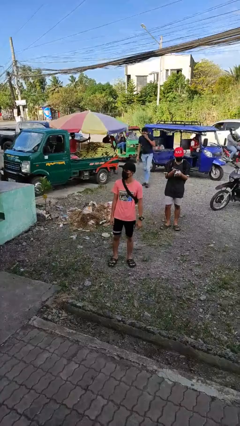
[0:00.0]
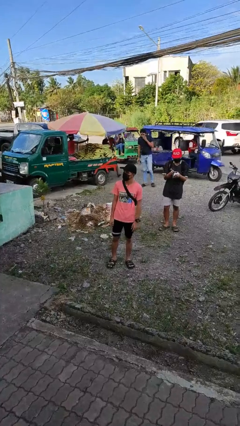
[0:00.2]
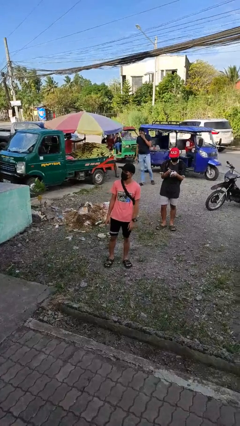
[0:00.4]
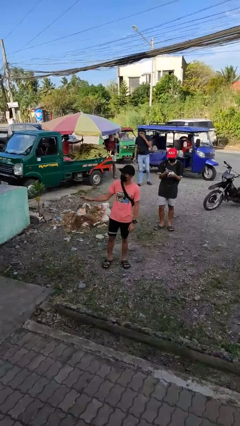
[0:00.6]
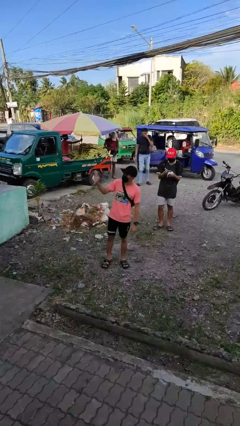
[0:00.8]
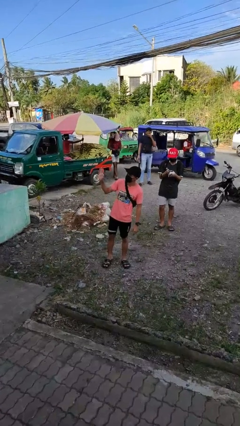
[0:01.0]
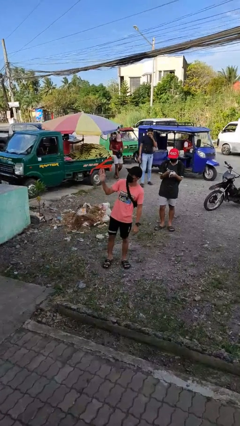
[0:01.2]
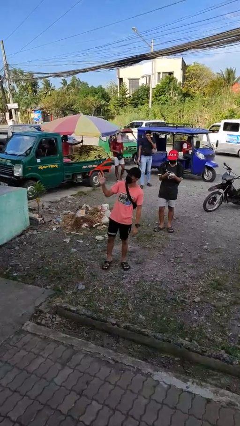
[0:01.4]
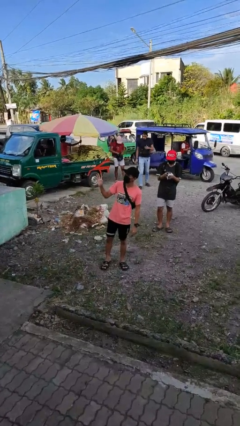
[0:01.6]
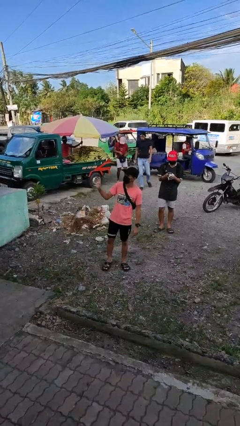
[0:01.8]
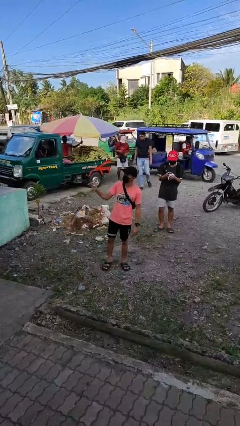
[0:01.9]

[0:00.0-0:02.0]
person waves at person

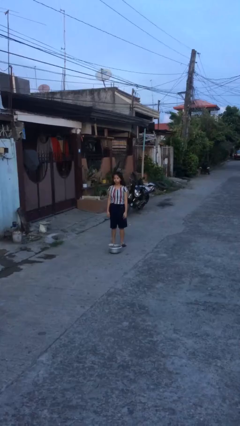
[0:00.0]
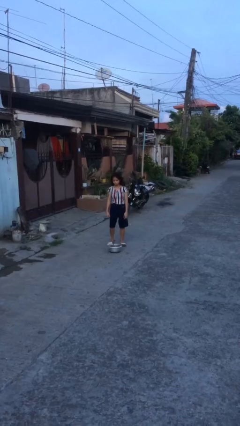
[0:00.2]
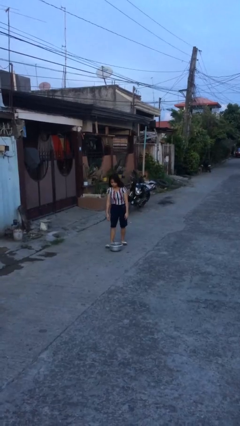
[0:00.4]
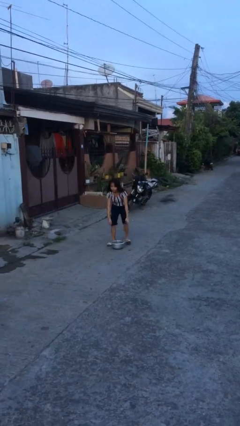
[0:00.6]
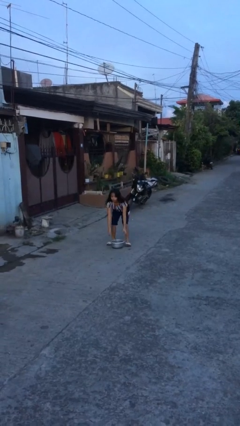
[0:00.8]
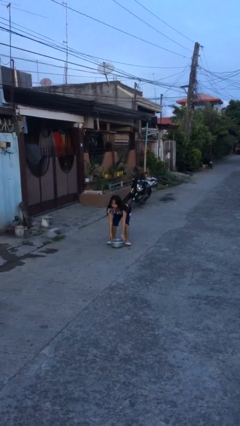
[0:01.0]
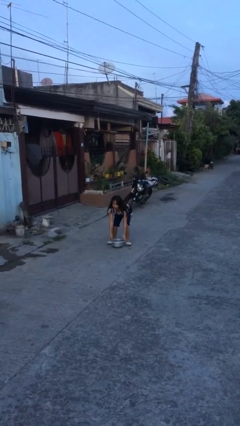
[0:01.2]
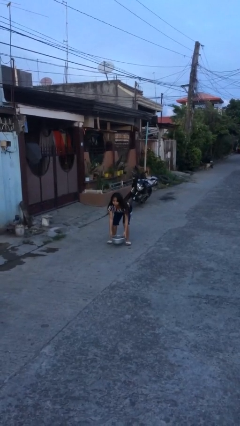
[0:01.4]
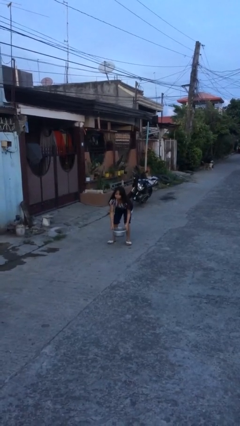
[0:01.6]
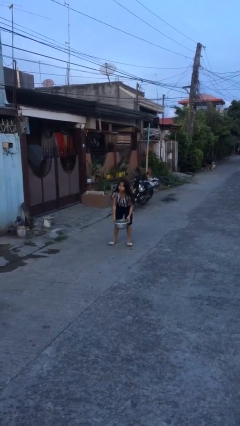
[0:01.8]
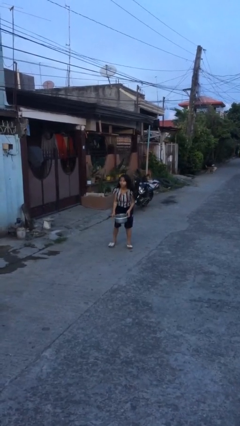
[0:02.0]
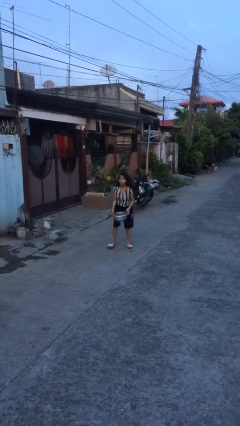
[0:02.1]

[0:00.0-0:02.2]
person picks up object from floor

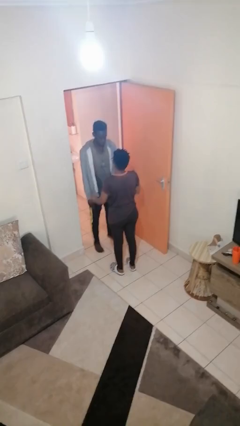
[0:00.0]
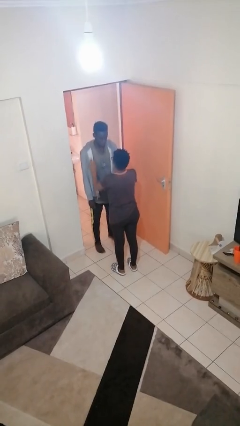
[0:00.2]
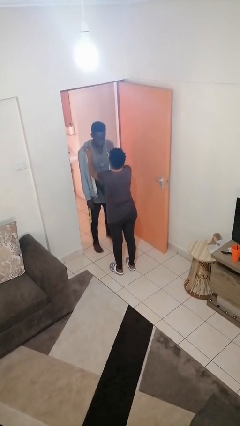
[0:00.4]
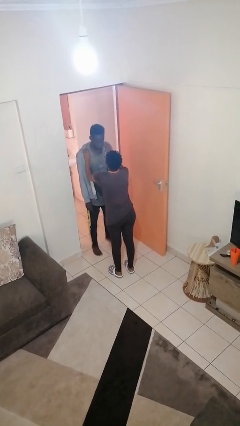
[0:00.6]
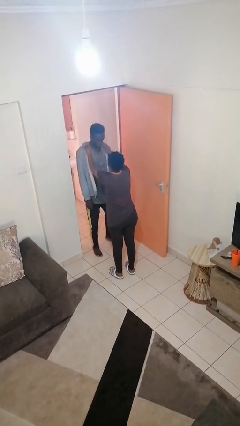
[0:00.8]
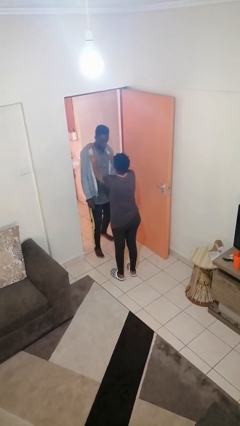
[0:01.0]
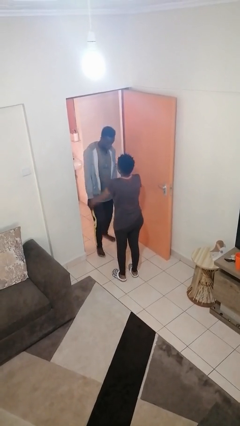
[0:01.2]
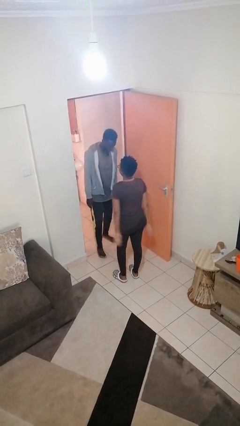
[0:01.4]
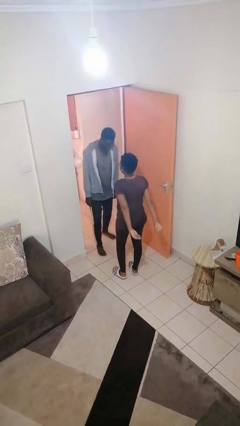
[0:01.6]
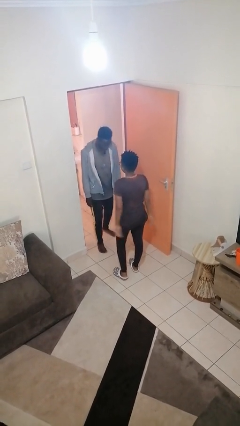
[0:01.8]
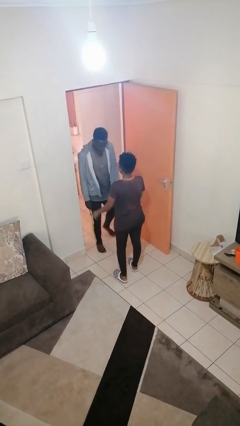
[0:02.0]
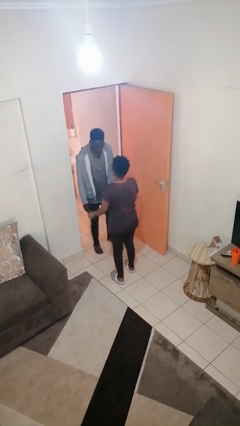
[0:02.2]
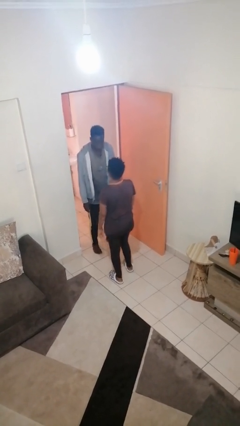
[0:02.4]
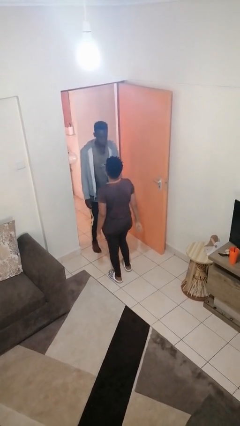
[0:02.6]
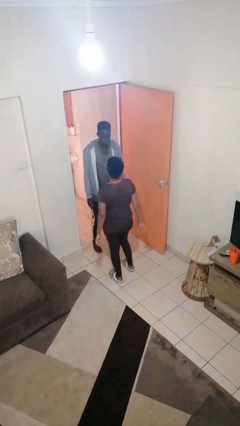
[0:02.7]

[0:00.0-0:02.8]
person shoves person

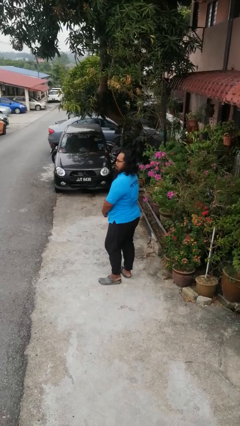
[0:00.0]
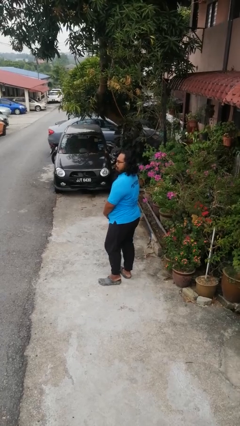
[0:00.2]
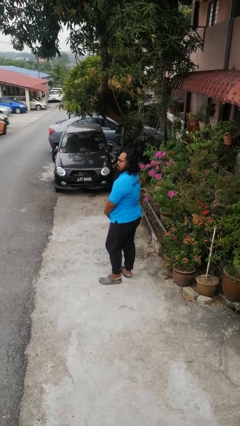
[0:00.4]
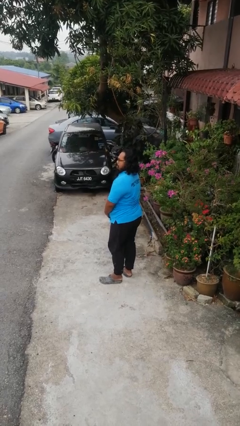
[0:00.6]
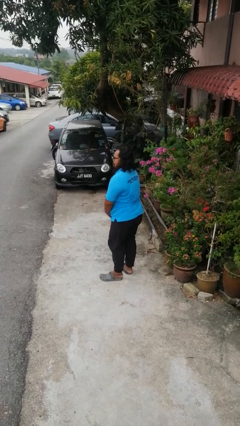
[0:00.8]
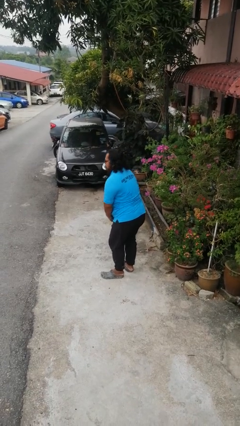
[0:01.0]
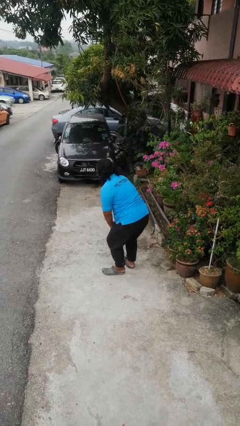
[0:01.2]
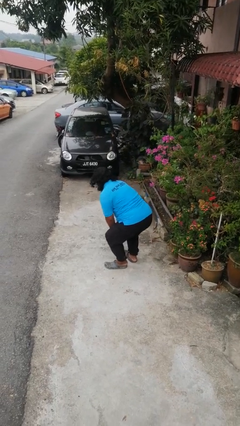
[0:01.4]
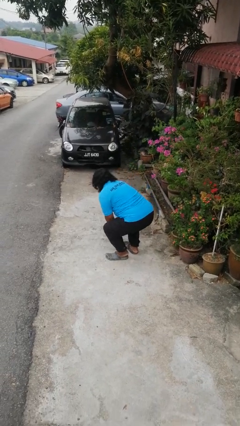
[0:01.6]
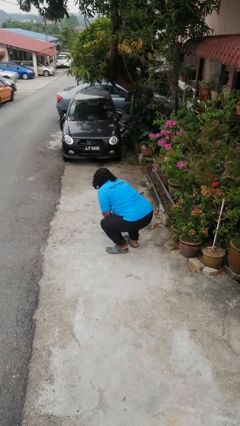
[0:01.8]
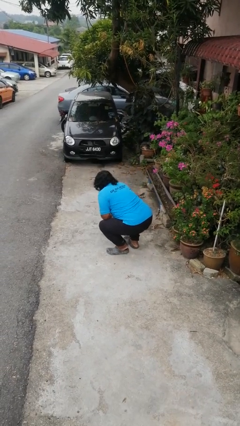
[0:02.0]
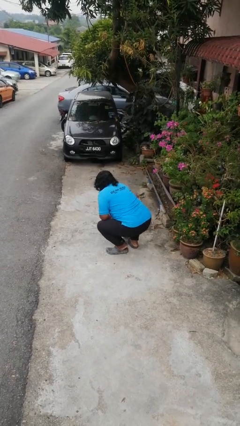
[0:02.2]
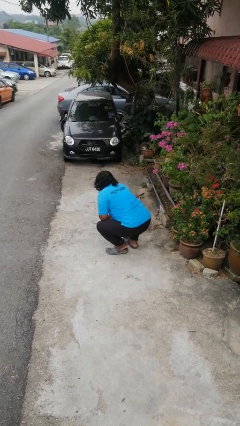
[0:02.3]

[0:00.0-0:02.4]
person squats

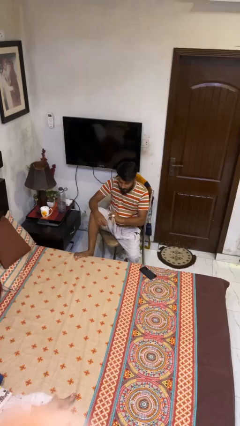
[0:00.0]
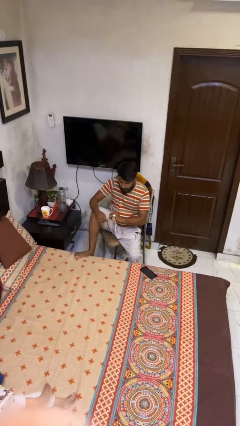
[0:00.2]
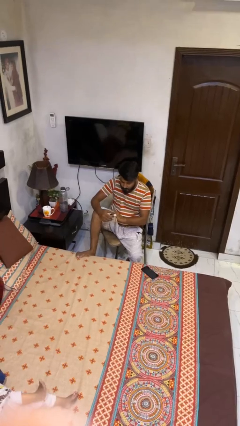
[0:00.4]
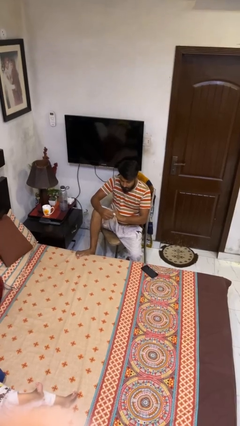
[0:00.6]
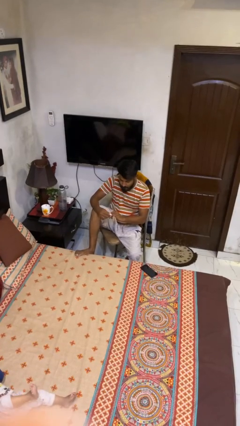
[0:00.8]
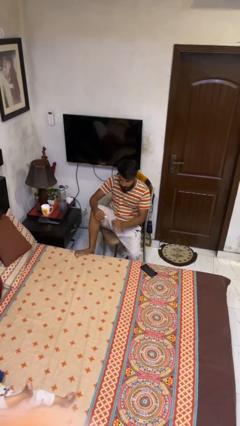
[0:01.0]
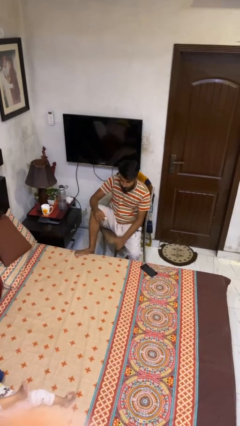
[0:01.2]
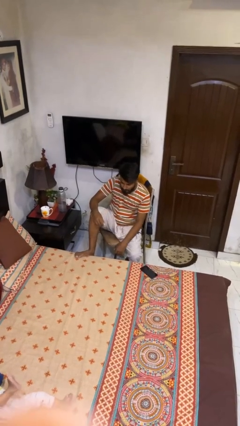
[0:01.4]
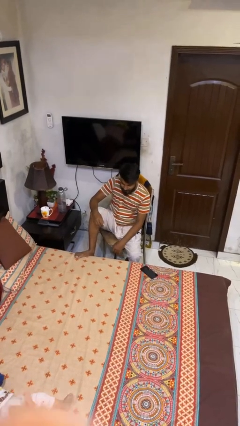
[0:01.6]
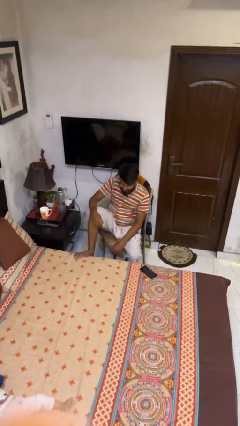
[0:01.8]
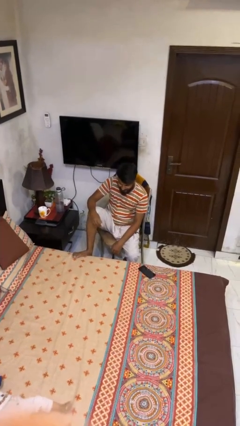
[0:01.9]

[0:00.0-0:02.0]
person takes off ring

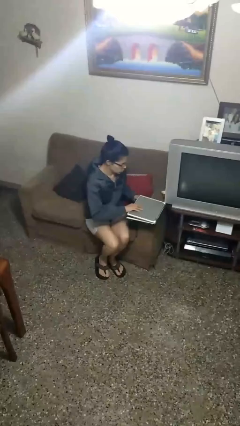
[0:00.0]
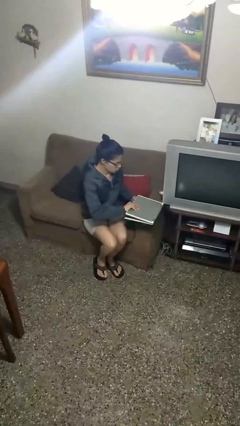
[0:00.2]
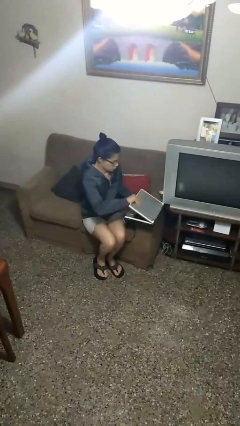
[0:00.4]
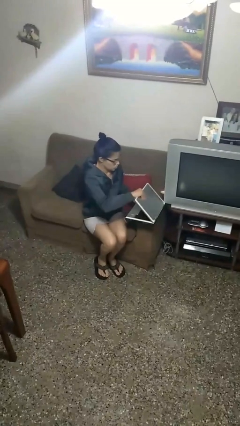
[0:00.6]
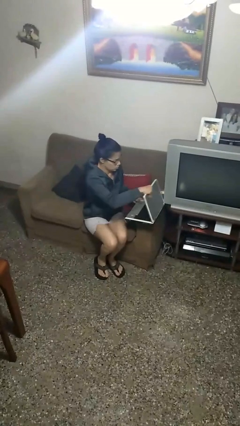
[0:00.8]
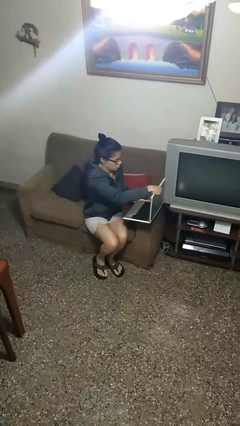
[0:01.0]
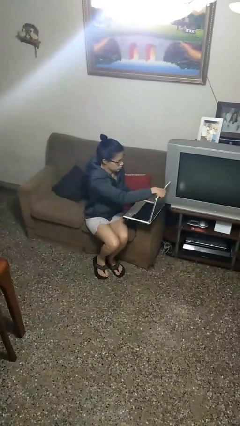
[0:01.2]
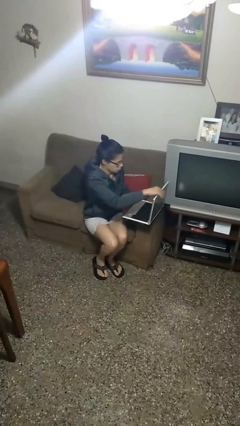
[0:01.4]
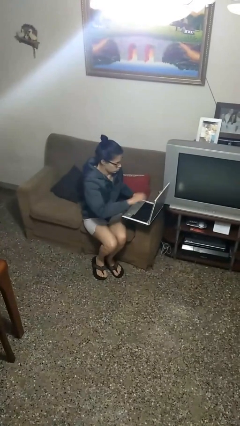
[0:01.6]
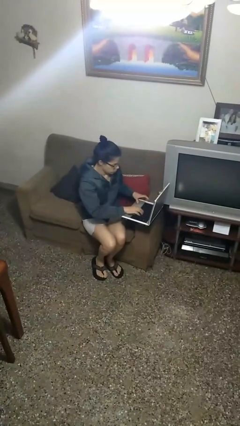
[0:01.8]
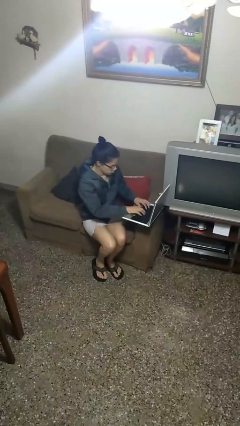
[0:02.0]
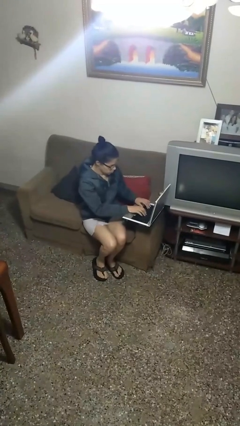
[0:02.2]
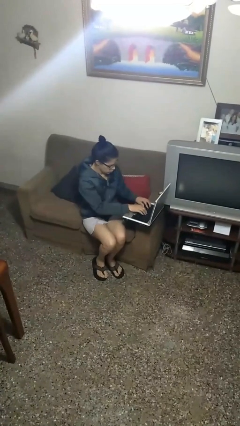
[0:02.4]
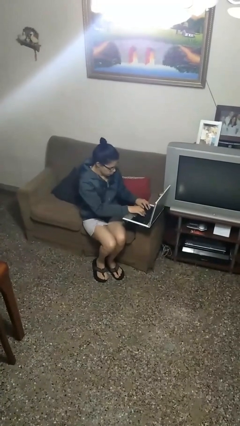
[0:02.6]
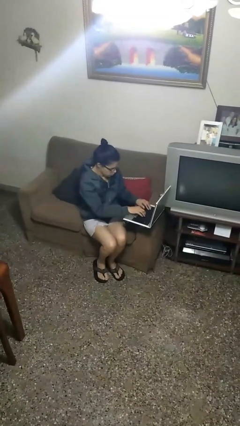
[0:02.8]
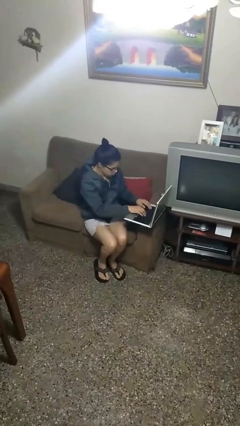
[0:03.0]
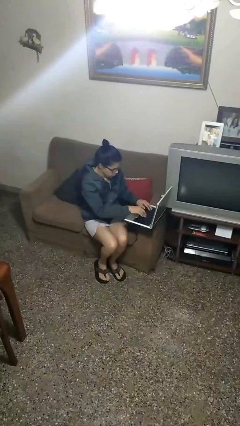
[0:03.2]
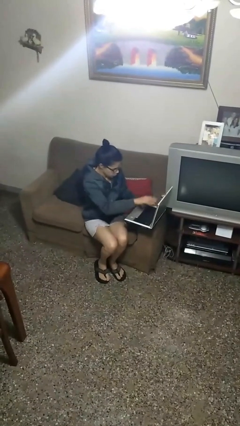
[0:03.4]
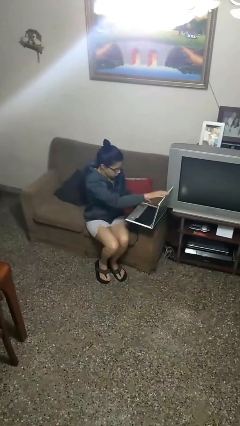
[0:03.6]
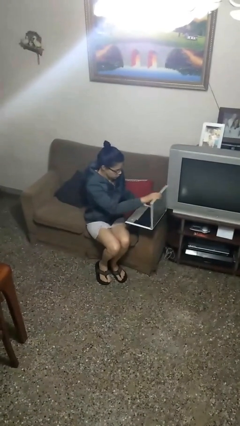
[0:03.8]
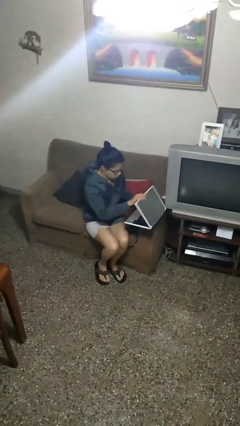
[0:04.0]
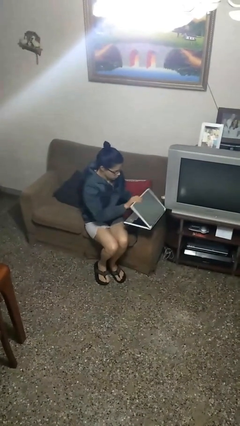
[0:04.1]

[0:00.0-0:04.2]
person interacts with laptop

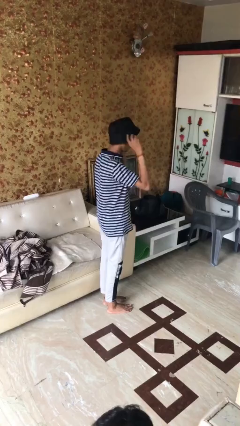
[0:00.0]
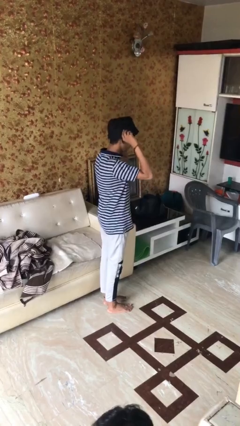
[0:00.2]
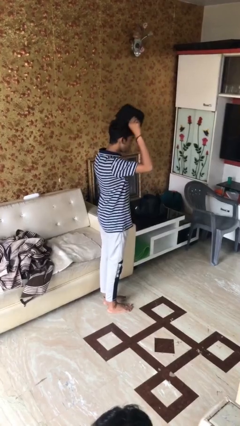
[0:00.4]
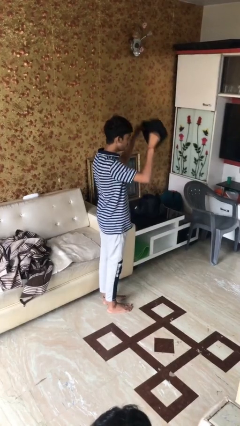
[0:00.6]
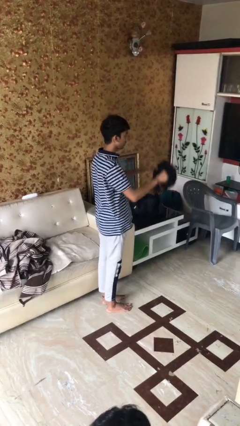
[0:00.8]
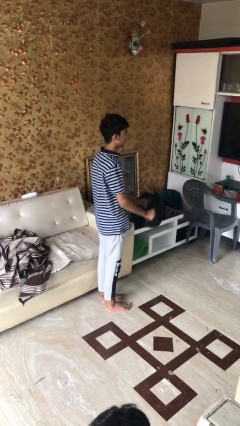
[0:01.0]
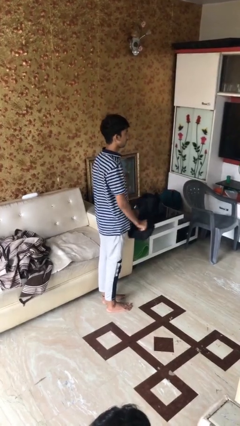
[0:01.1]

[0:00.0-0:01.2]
person takes off hat

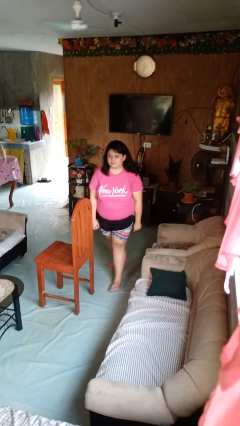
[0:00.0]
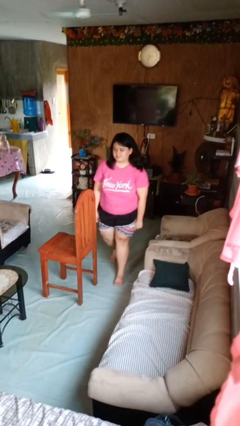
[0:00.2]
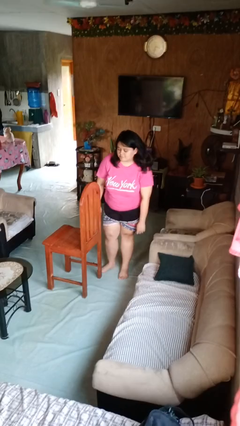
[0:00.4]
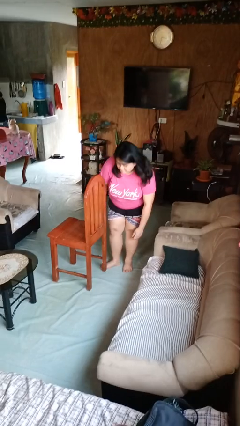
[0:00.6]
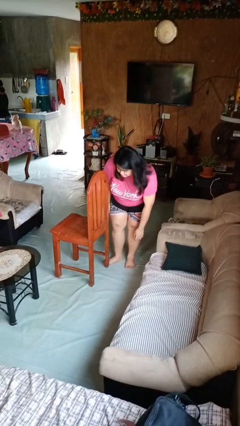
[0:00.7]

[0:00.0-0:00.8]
person stubs toe
